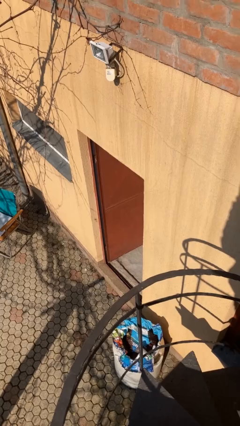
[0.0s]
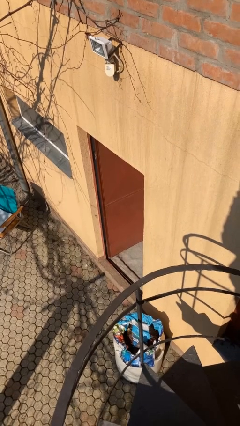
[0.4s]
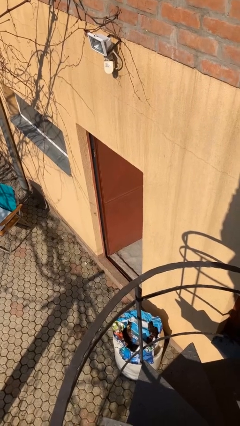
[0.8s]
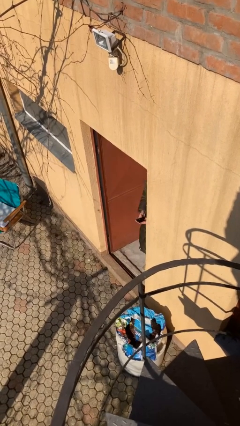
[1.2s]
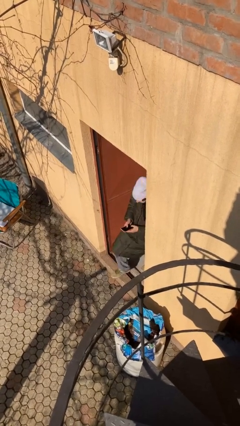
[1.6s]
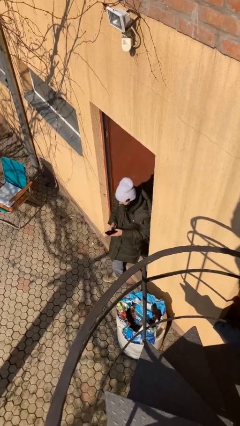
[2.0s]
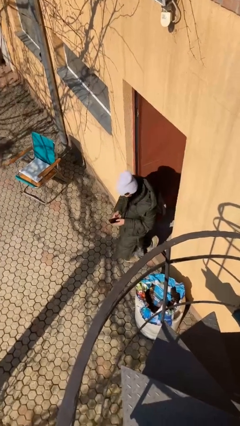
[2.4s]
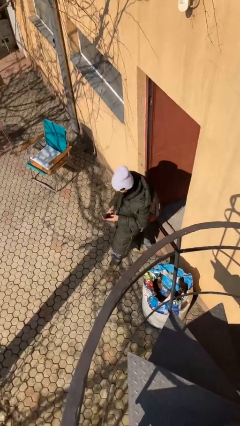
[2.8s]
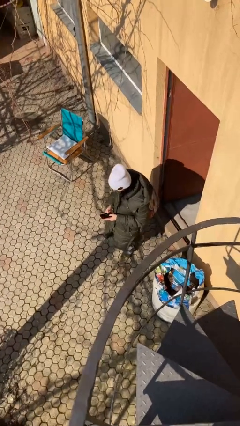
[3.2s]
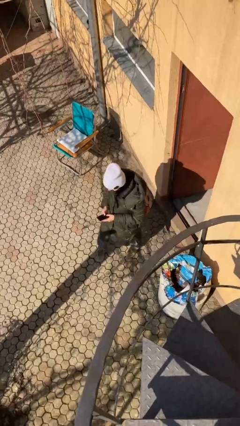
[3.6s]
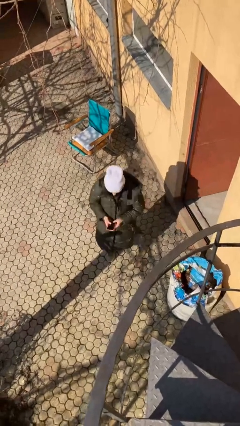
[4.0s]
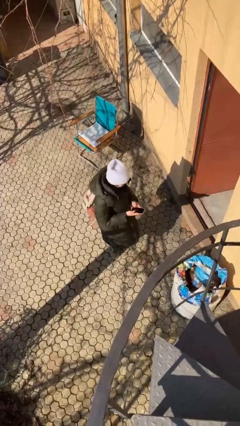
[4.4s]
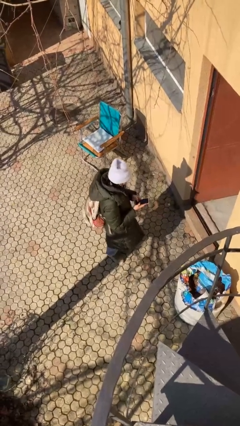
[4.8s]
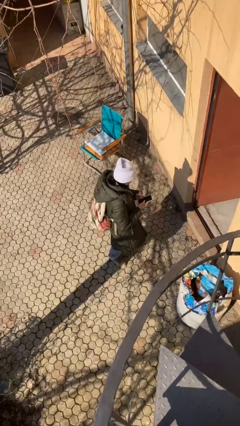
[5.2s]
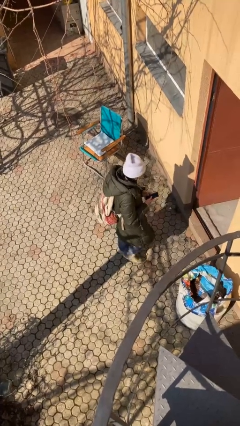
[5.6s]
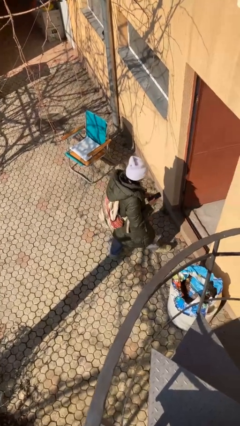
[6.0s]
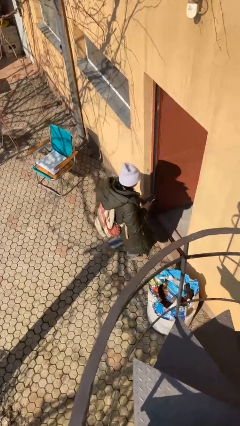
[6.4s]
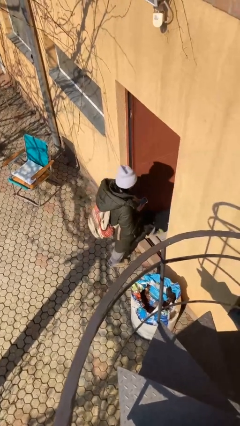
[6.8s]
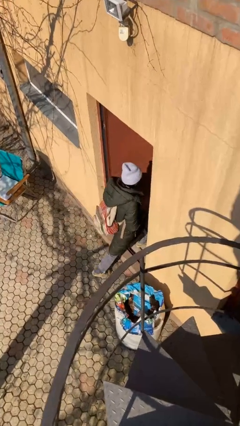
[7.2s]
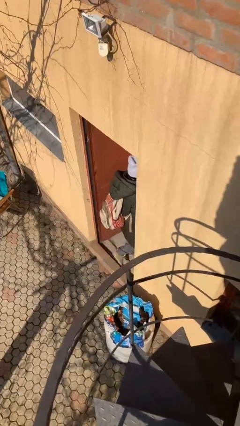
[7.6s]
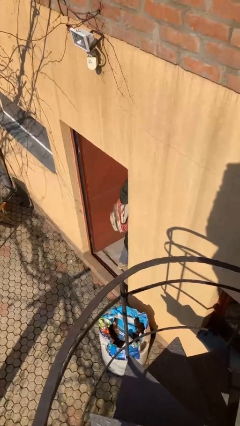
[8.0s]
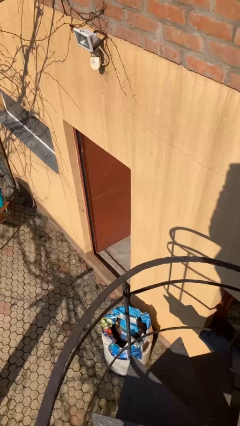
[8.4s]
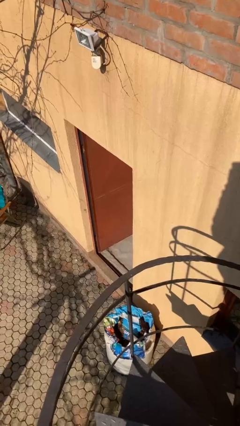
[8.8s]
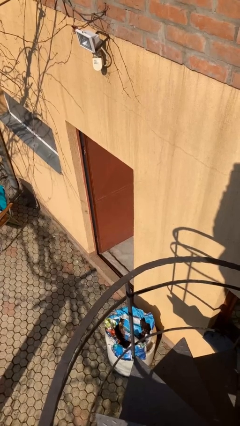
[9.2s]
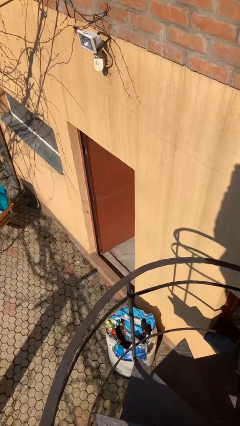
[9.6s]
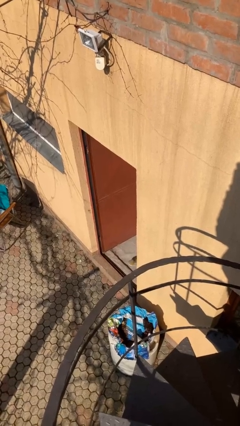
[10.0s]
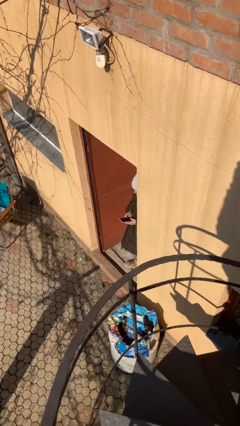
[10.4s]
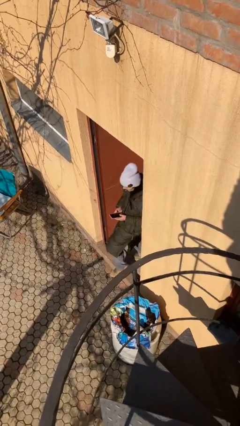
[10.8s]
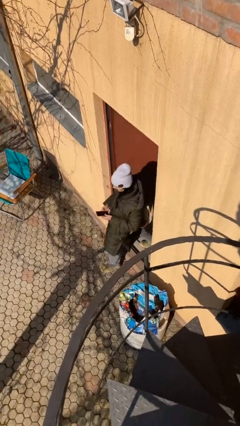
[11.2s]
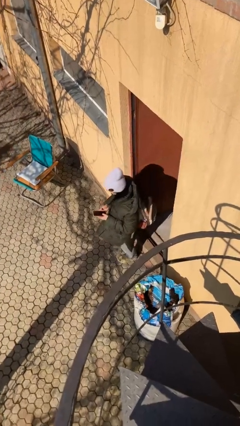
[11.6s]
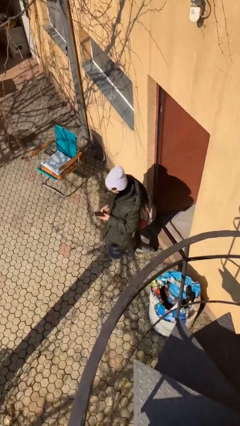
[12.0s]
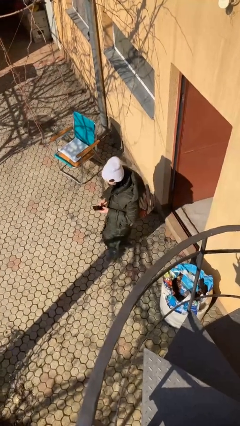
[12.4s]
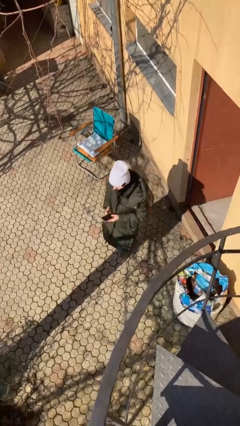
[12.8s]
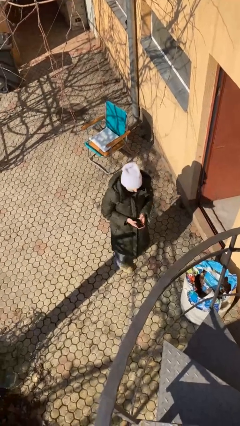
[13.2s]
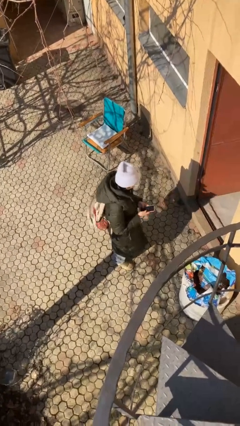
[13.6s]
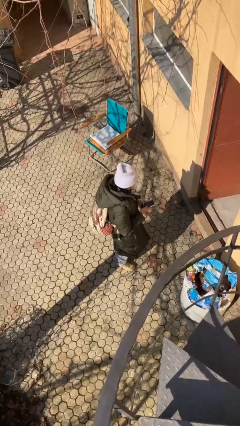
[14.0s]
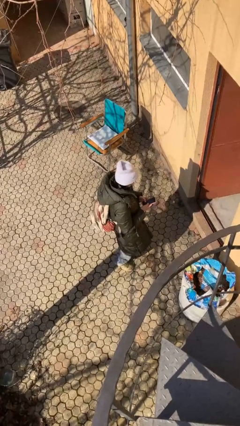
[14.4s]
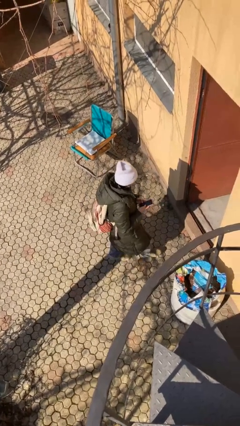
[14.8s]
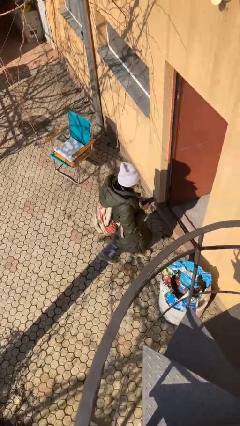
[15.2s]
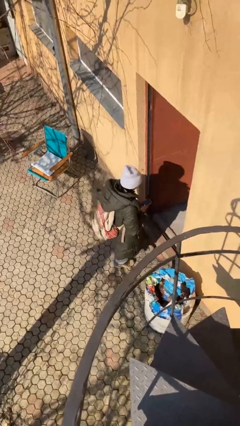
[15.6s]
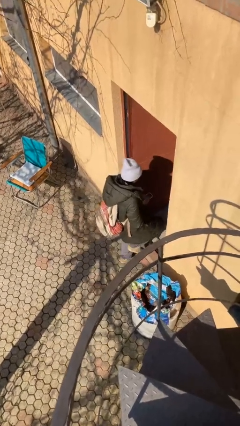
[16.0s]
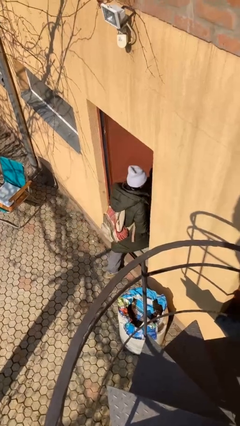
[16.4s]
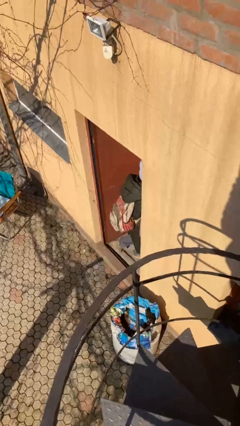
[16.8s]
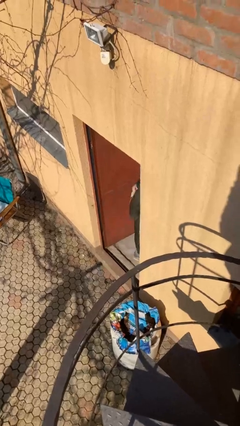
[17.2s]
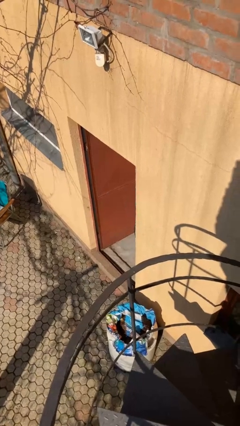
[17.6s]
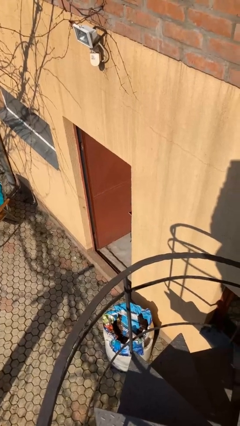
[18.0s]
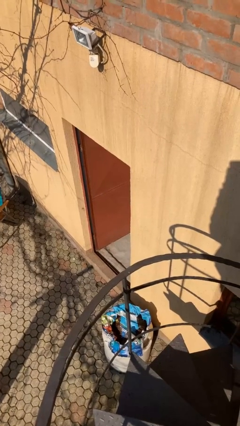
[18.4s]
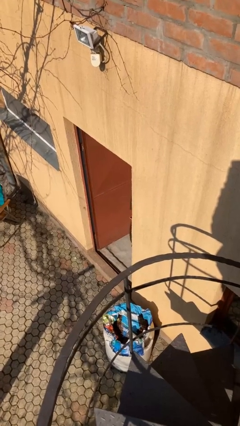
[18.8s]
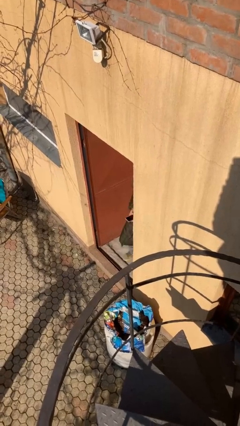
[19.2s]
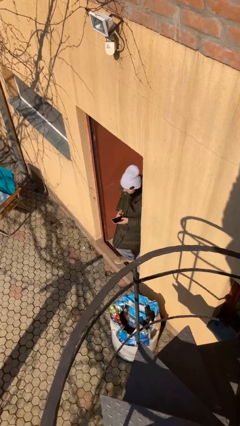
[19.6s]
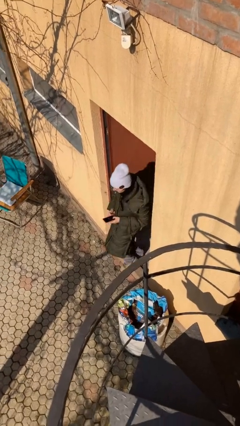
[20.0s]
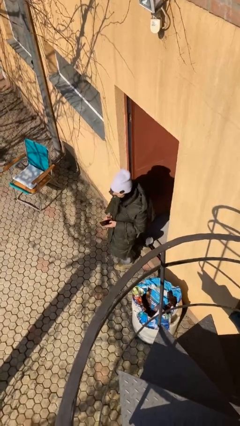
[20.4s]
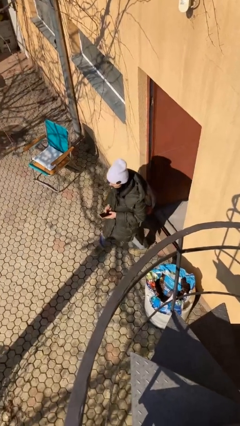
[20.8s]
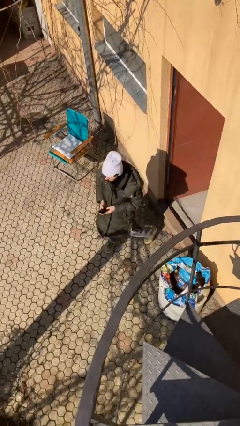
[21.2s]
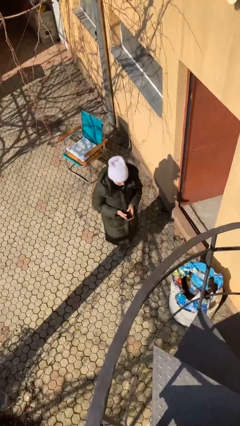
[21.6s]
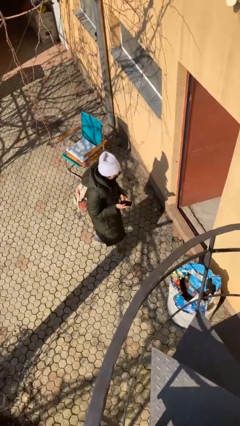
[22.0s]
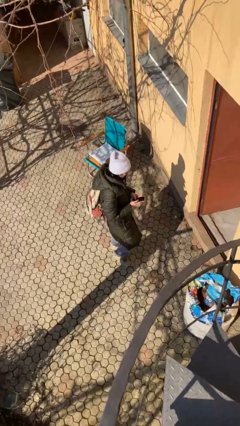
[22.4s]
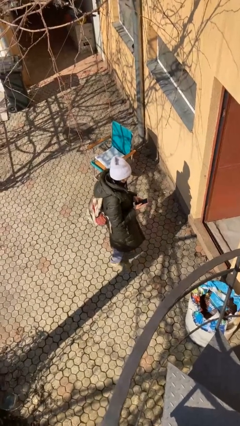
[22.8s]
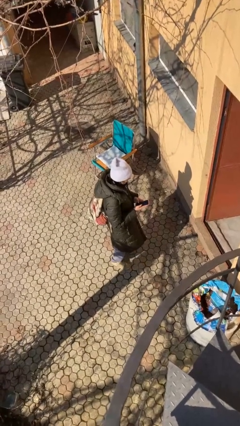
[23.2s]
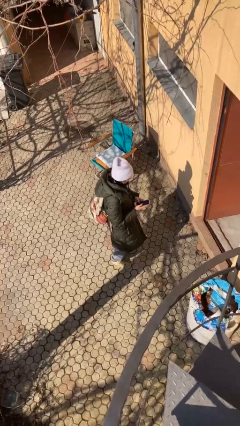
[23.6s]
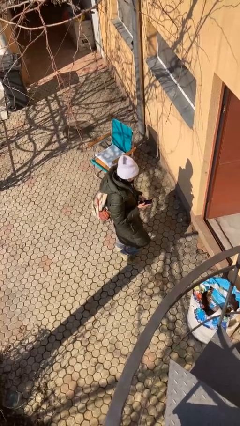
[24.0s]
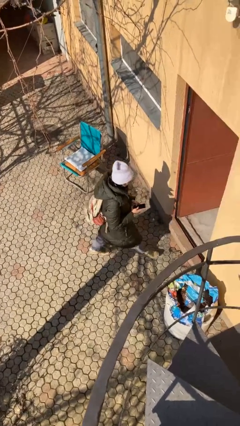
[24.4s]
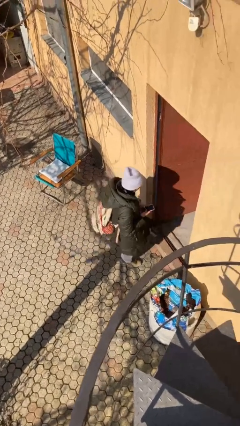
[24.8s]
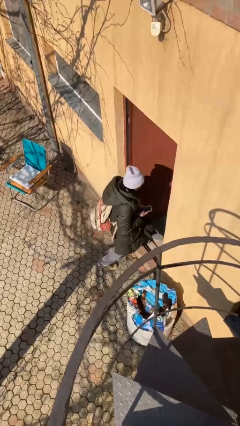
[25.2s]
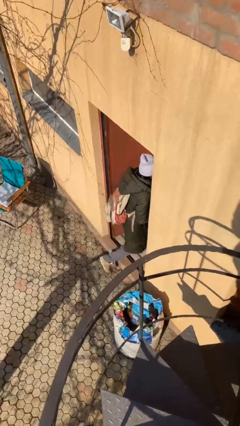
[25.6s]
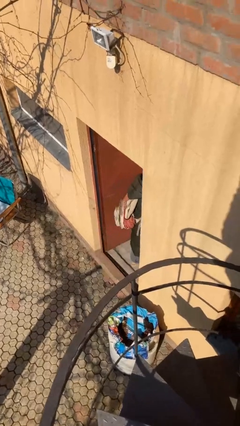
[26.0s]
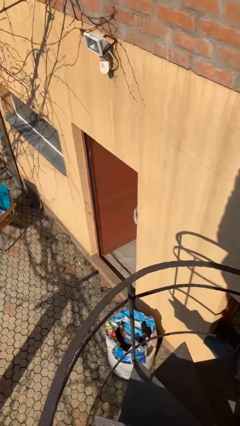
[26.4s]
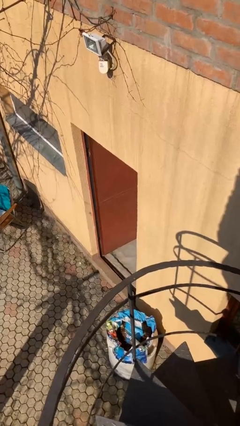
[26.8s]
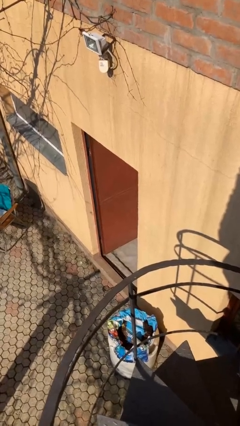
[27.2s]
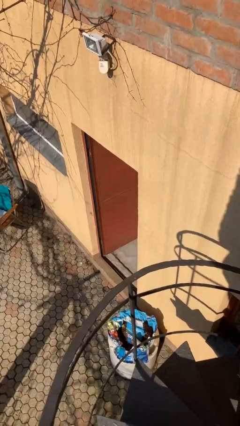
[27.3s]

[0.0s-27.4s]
person texts on phone

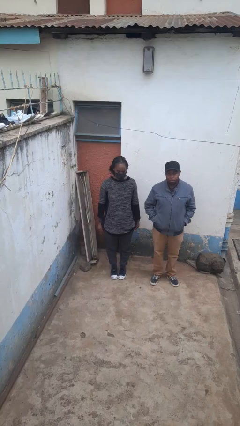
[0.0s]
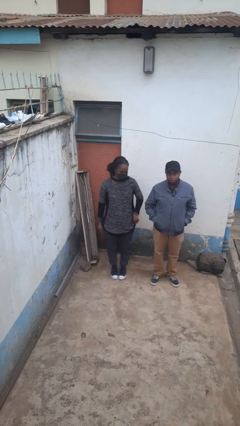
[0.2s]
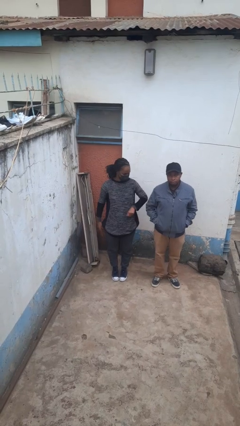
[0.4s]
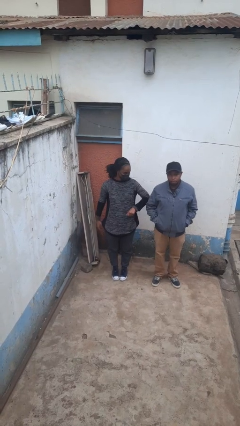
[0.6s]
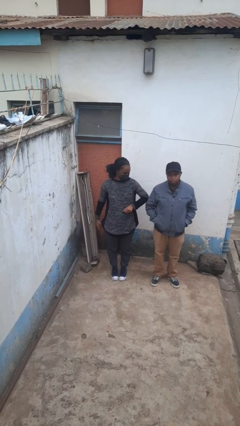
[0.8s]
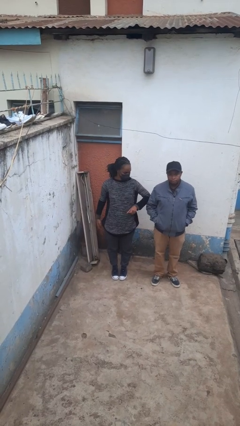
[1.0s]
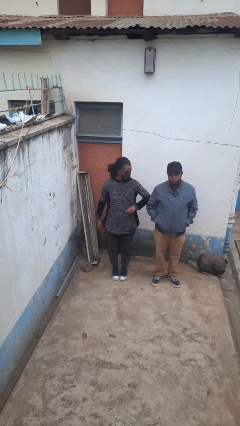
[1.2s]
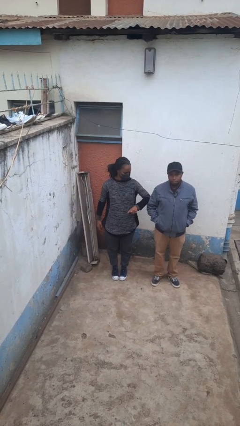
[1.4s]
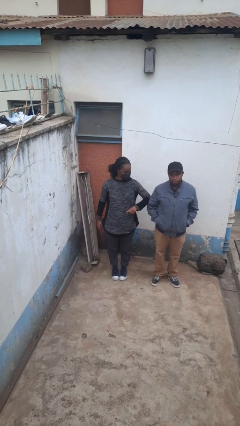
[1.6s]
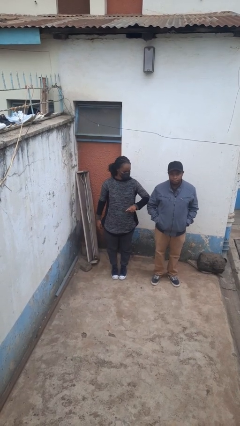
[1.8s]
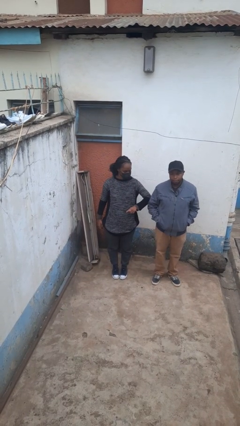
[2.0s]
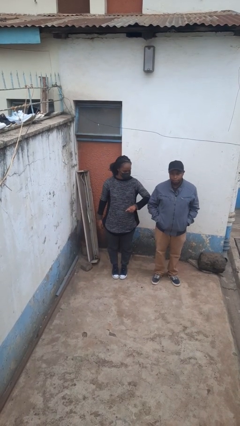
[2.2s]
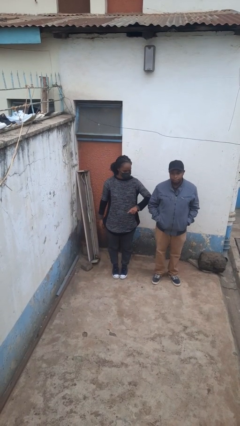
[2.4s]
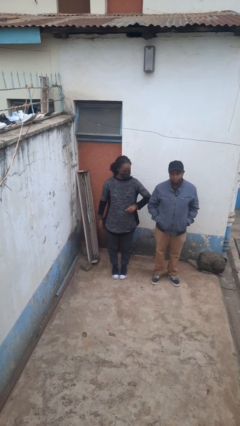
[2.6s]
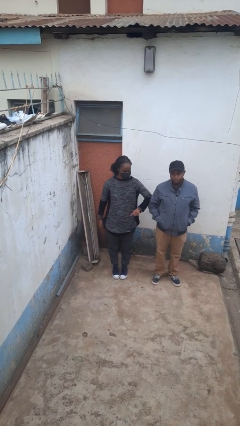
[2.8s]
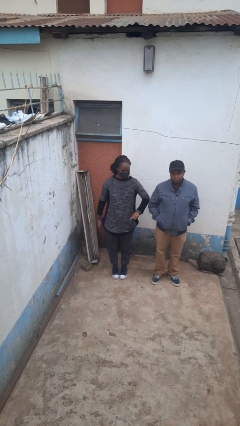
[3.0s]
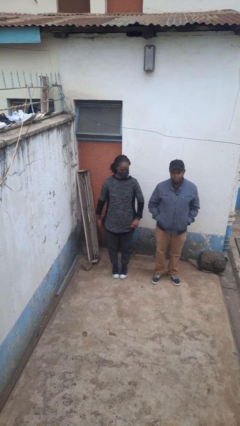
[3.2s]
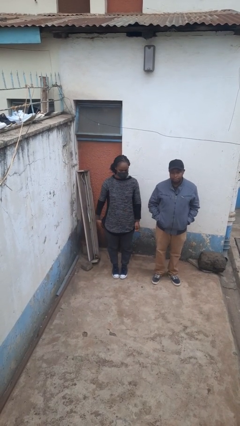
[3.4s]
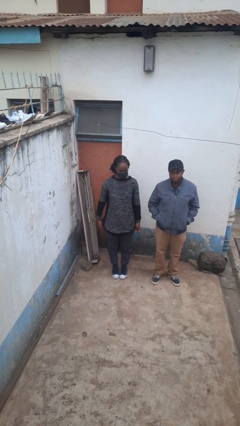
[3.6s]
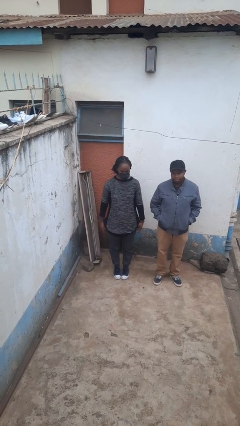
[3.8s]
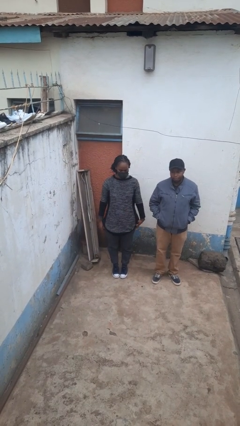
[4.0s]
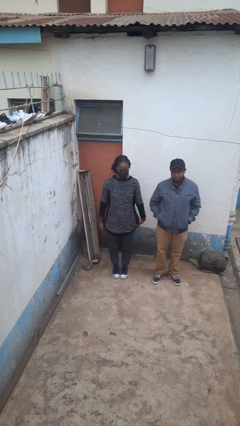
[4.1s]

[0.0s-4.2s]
person nudges person with elbow

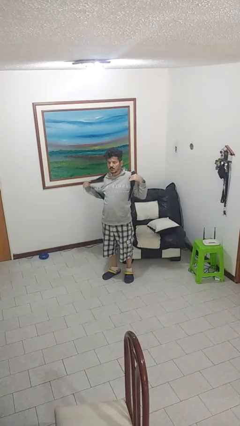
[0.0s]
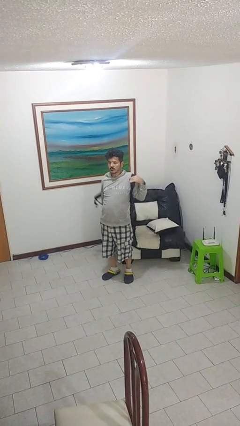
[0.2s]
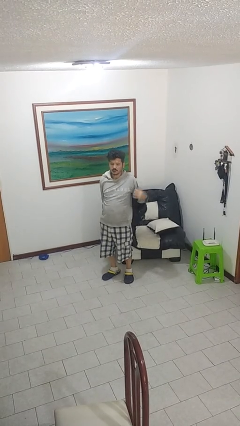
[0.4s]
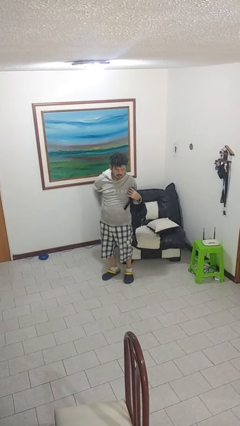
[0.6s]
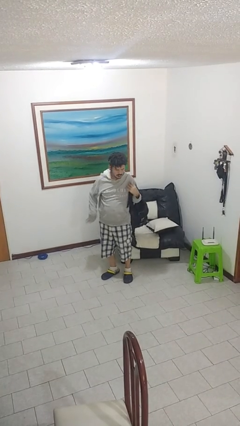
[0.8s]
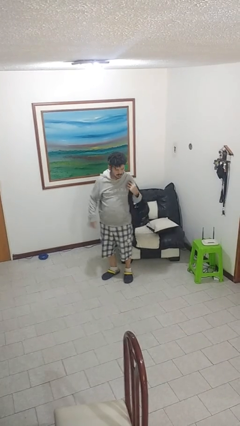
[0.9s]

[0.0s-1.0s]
person takes off backpack
